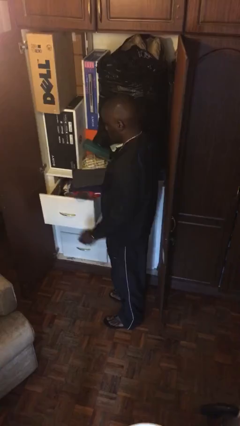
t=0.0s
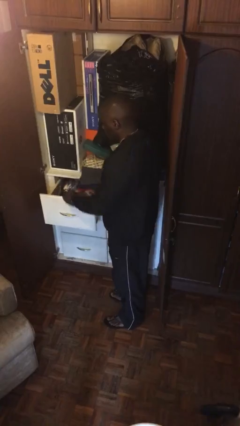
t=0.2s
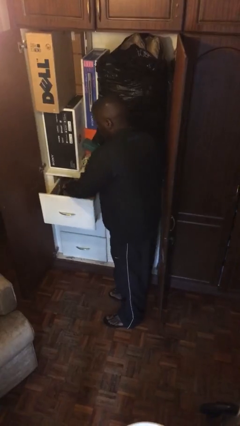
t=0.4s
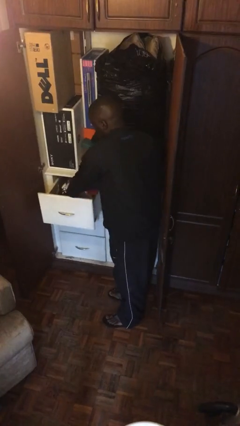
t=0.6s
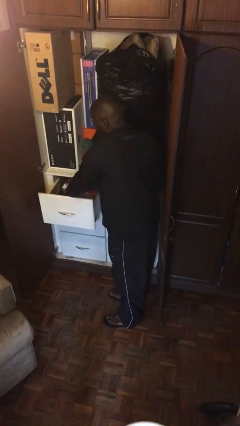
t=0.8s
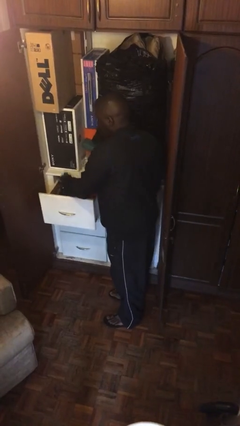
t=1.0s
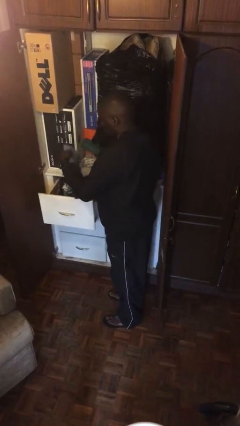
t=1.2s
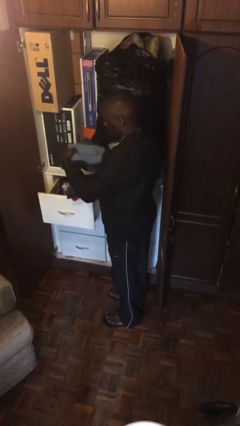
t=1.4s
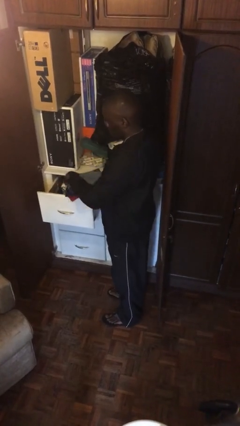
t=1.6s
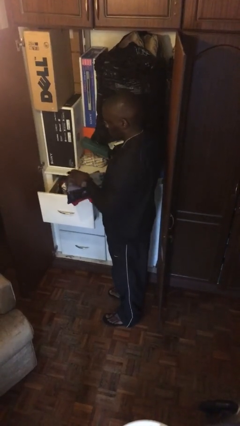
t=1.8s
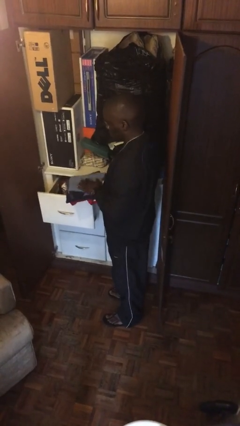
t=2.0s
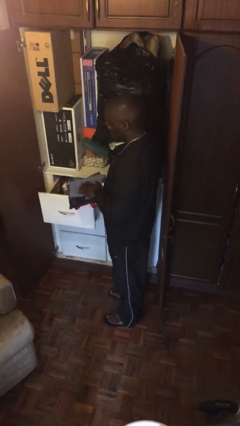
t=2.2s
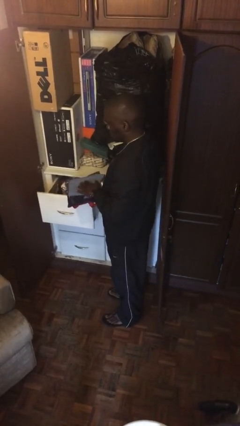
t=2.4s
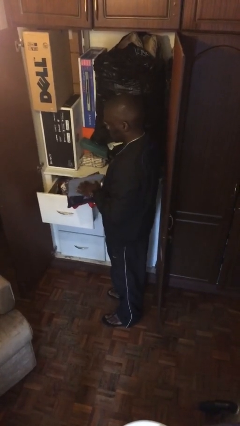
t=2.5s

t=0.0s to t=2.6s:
person takes clothes from dresser

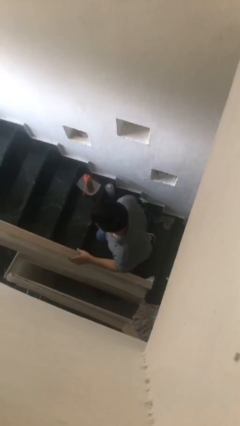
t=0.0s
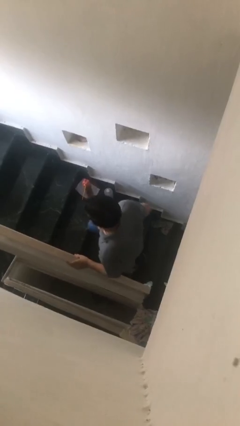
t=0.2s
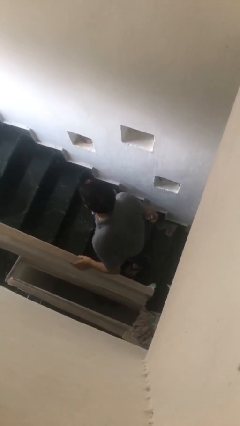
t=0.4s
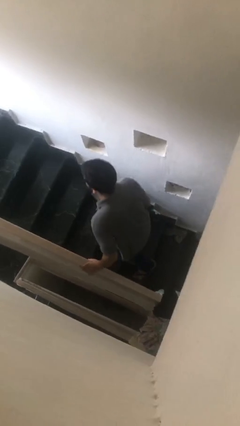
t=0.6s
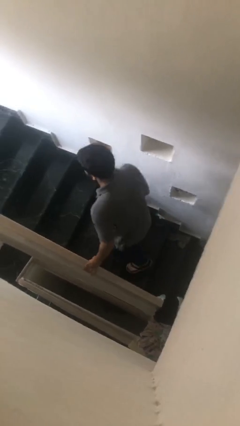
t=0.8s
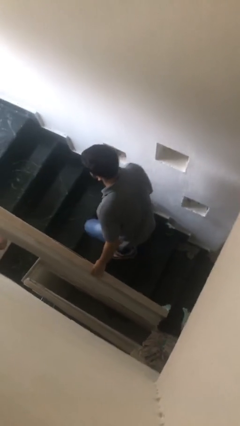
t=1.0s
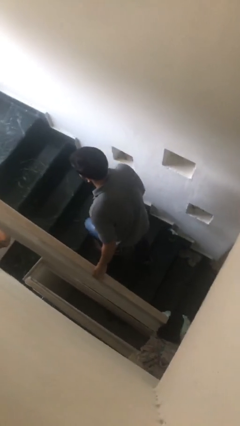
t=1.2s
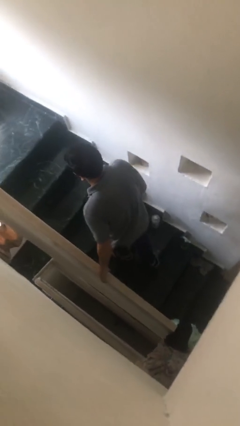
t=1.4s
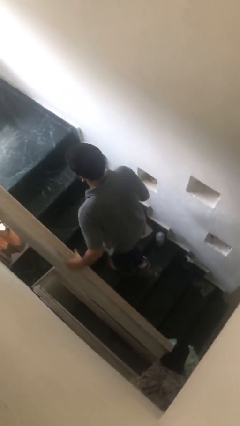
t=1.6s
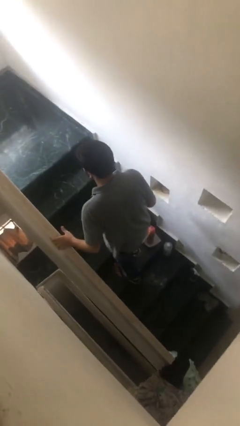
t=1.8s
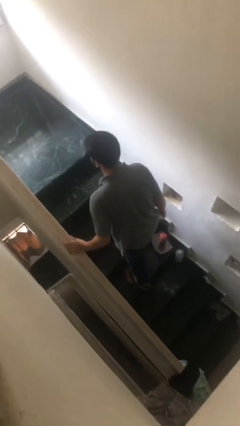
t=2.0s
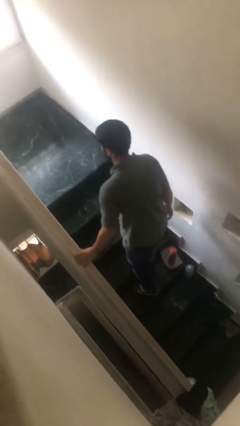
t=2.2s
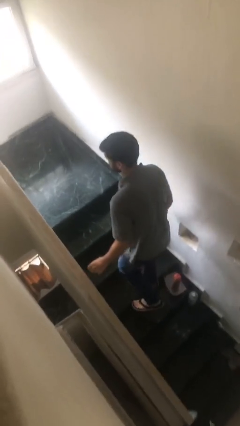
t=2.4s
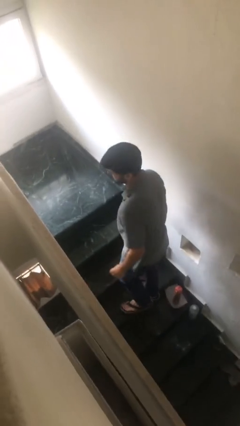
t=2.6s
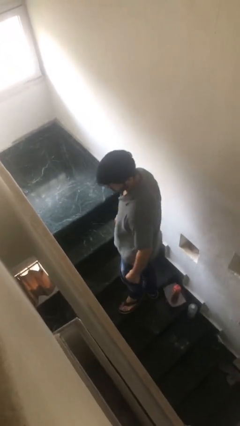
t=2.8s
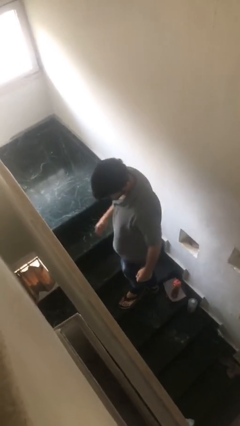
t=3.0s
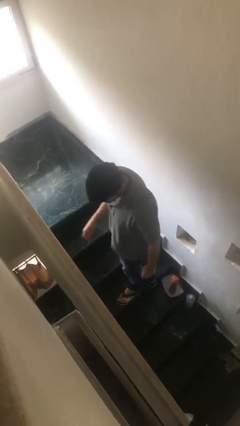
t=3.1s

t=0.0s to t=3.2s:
person climbs up stairs

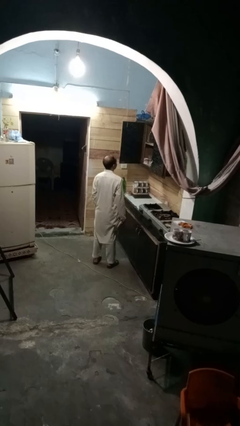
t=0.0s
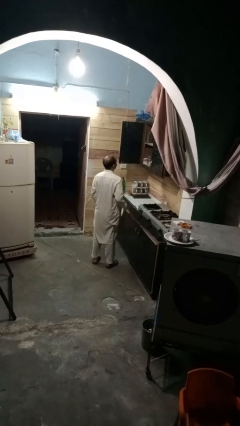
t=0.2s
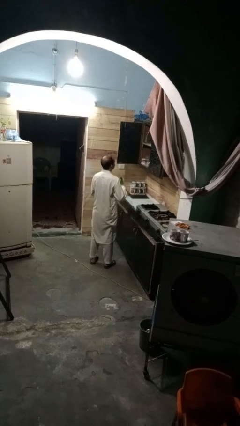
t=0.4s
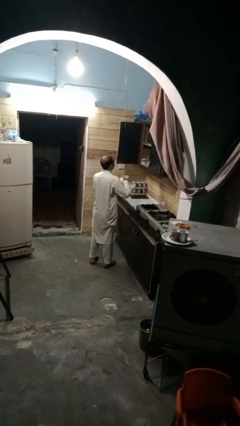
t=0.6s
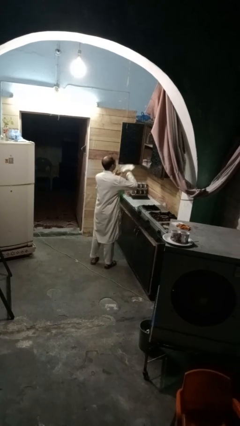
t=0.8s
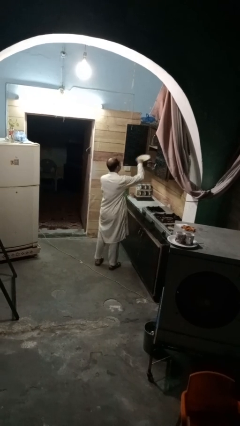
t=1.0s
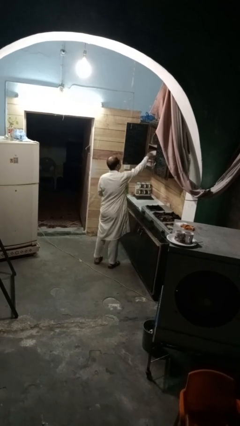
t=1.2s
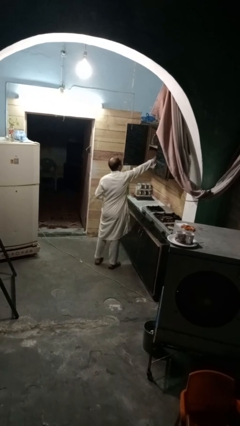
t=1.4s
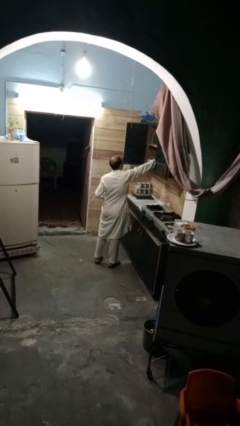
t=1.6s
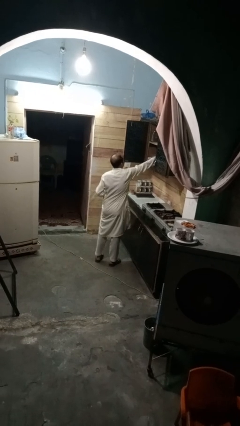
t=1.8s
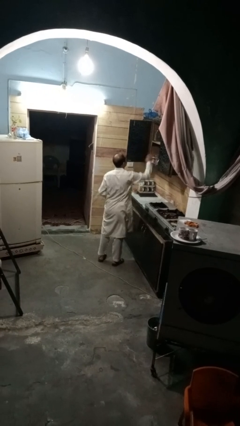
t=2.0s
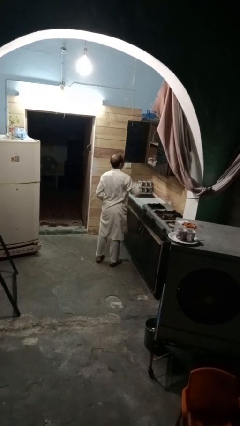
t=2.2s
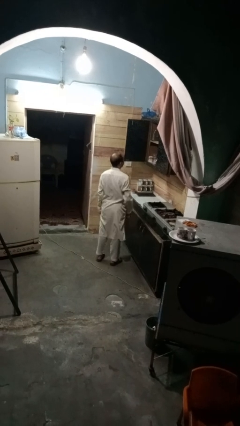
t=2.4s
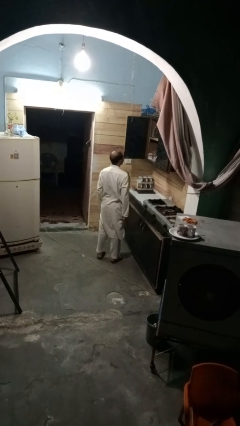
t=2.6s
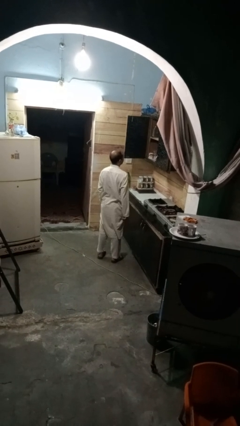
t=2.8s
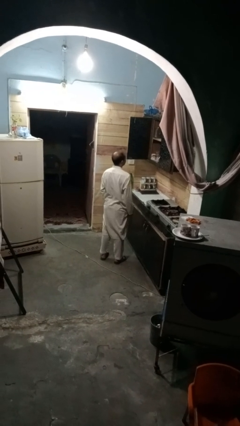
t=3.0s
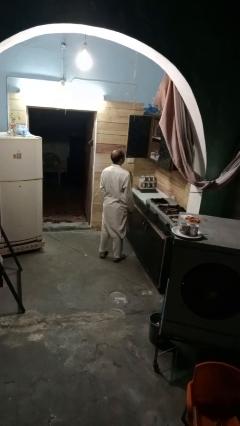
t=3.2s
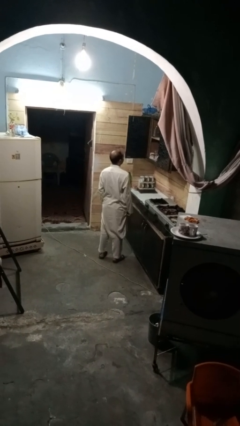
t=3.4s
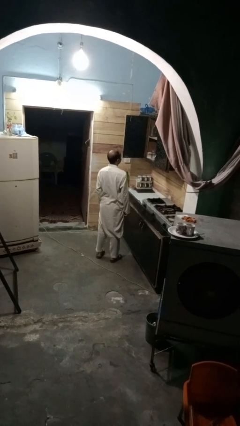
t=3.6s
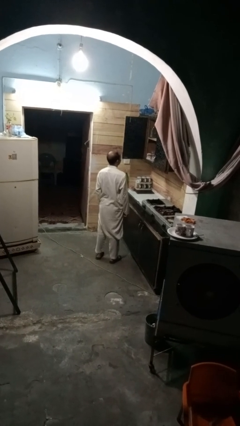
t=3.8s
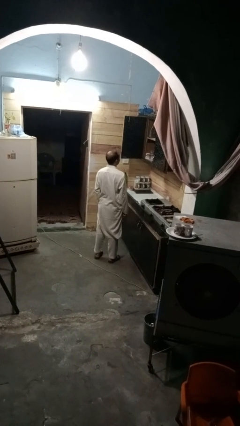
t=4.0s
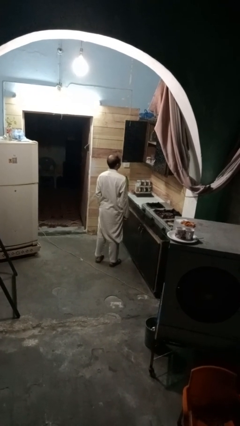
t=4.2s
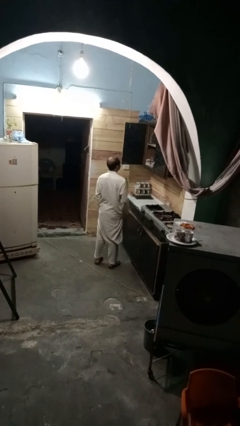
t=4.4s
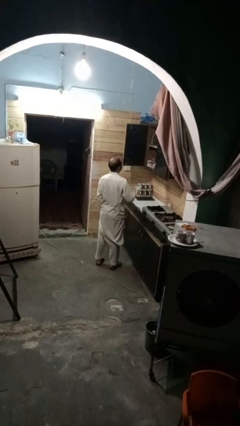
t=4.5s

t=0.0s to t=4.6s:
person puts object in cabinet

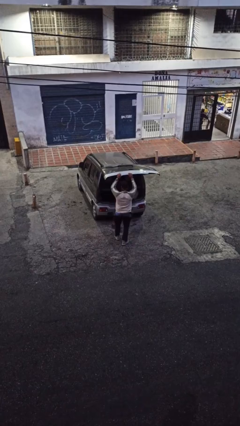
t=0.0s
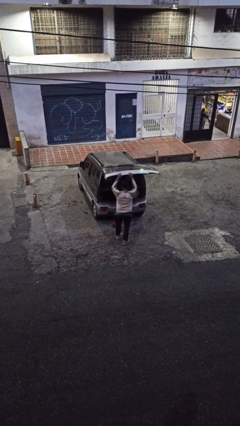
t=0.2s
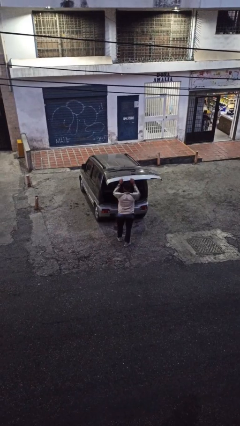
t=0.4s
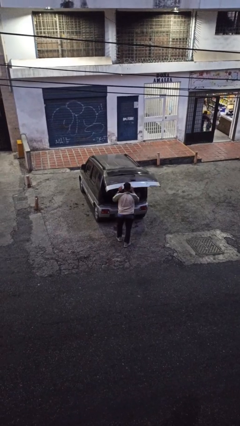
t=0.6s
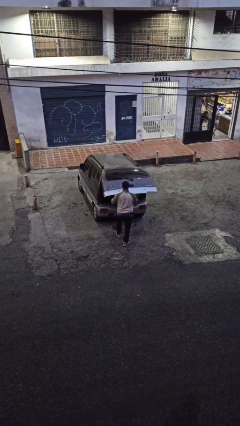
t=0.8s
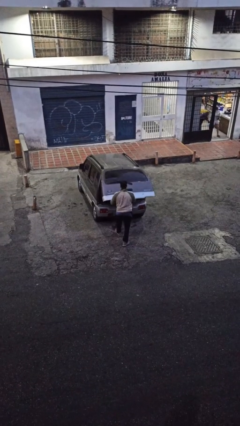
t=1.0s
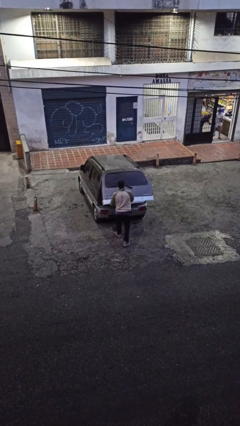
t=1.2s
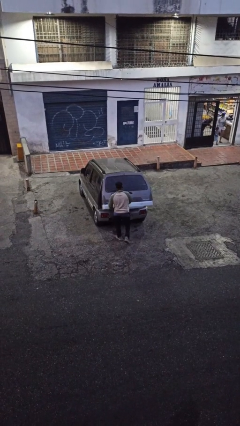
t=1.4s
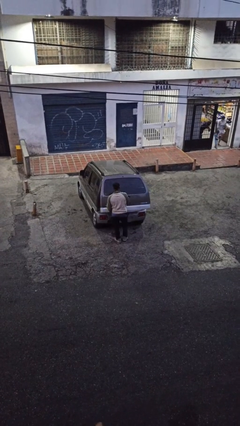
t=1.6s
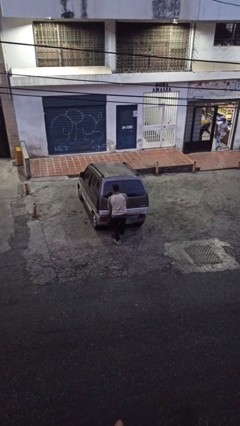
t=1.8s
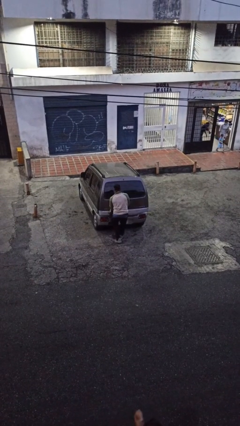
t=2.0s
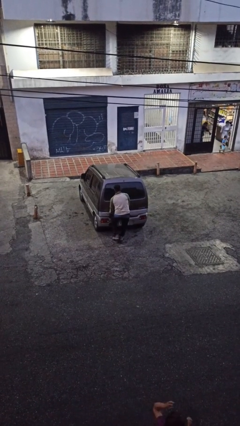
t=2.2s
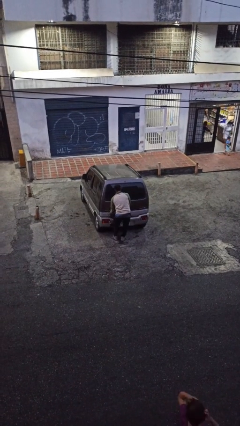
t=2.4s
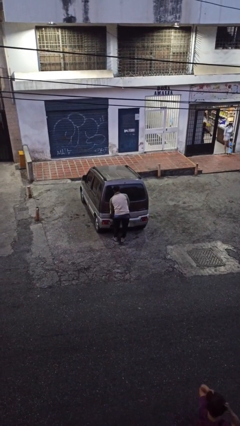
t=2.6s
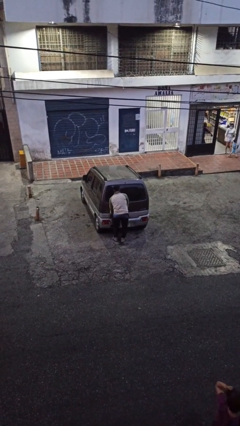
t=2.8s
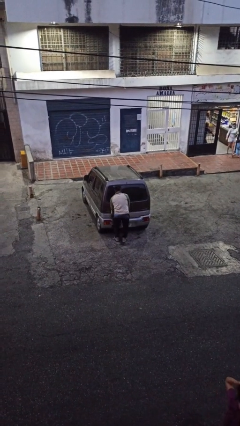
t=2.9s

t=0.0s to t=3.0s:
person closes car trunk

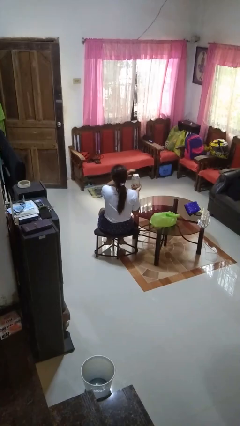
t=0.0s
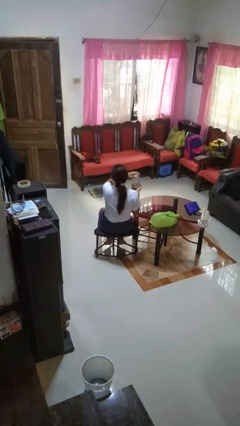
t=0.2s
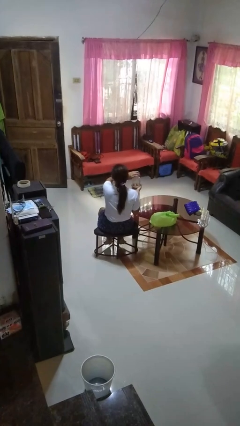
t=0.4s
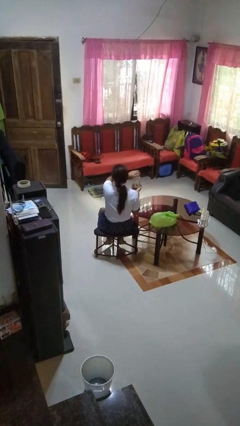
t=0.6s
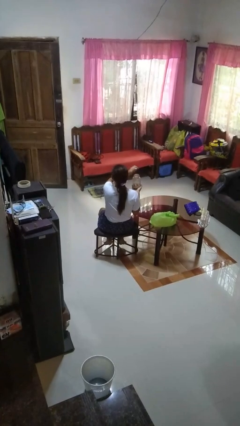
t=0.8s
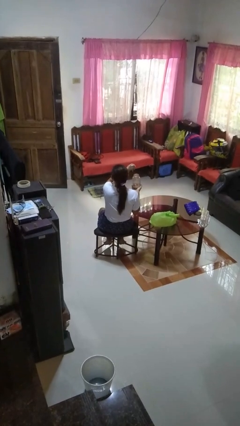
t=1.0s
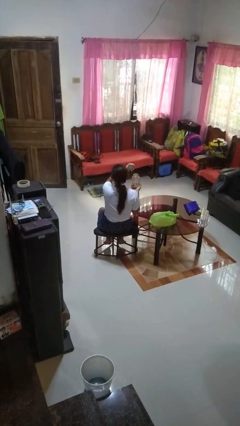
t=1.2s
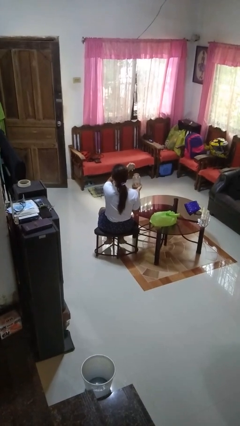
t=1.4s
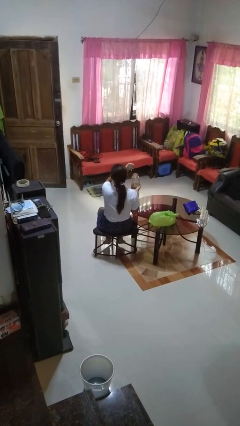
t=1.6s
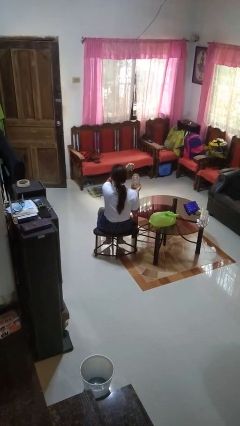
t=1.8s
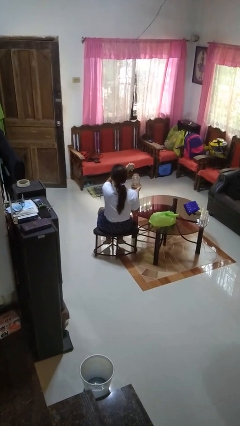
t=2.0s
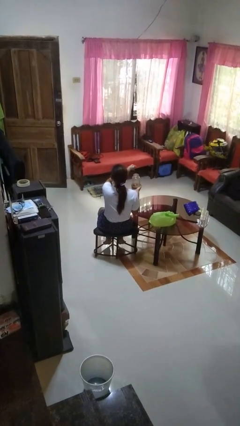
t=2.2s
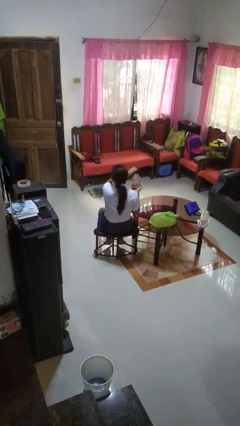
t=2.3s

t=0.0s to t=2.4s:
person opens jar

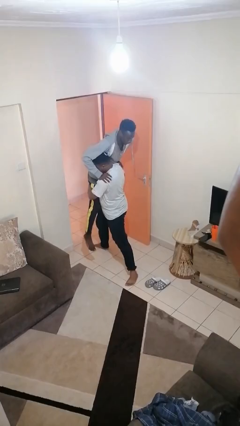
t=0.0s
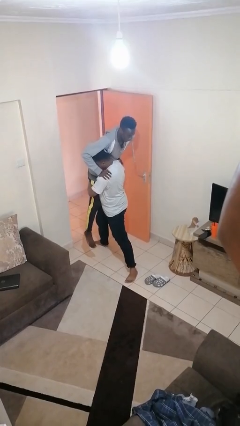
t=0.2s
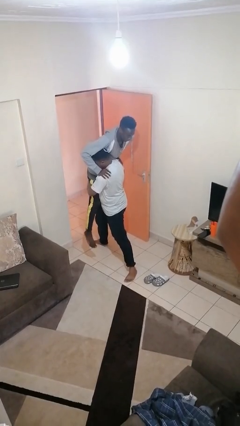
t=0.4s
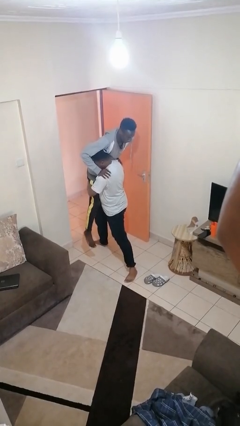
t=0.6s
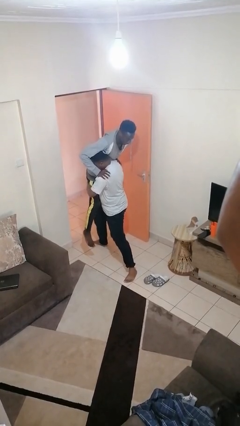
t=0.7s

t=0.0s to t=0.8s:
person picks up person

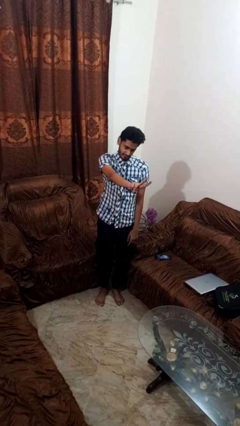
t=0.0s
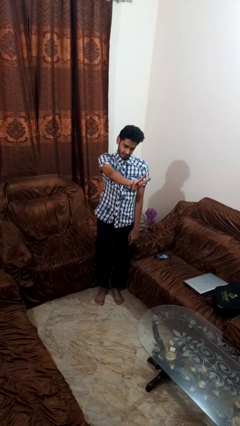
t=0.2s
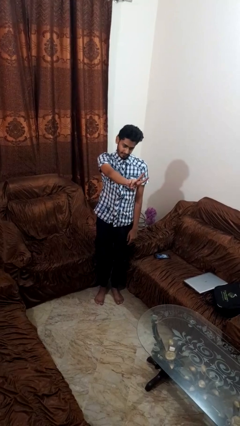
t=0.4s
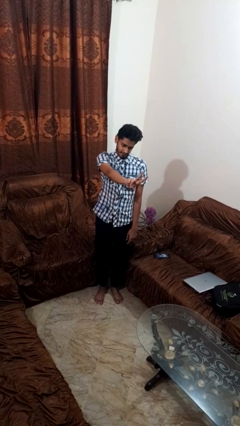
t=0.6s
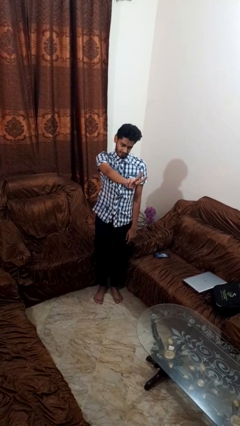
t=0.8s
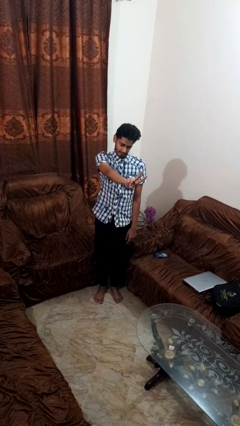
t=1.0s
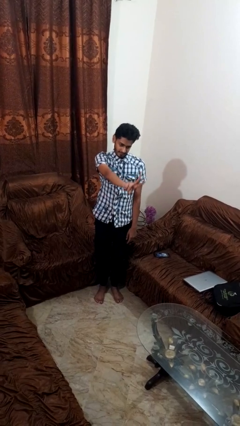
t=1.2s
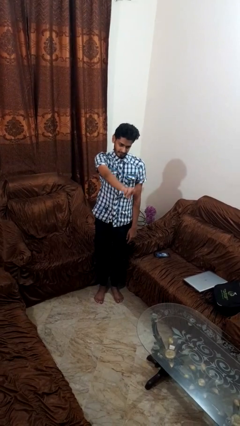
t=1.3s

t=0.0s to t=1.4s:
person gestures peace
